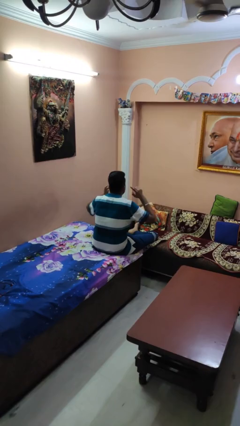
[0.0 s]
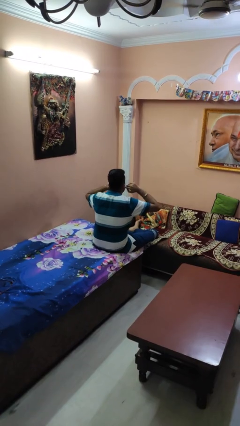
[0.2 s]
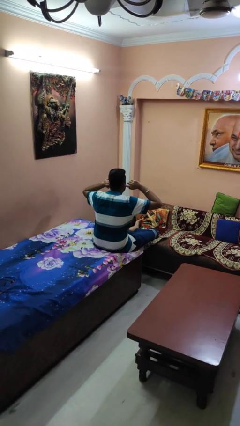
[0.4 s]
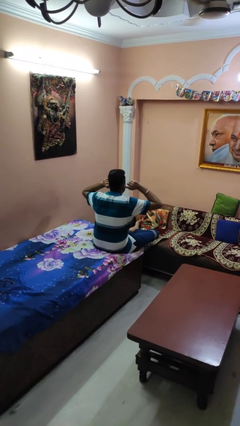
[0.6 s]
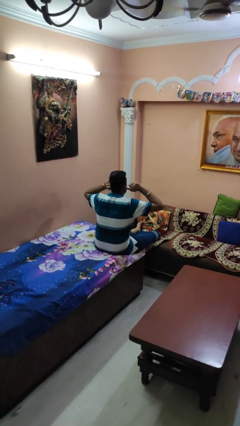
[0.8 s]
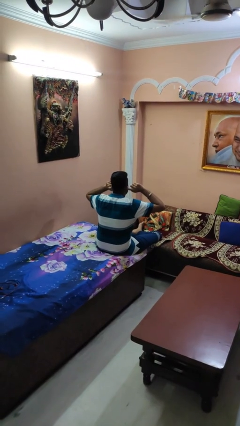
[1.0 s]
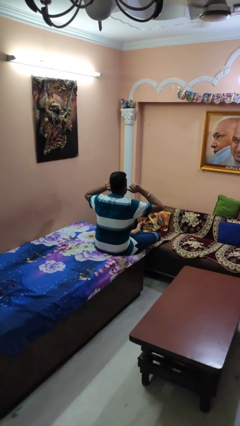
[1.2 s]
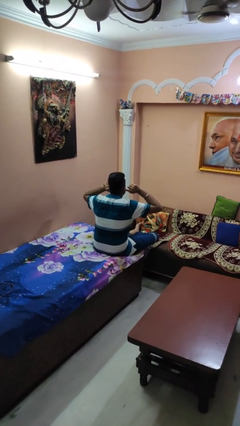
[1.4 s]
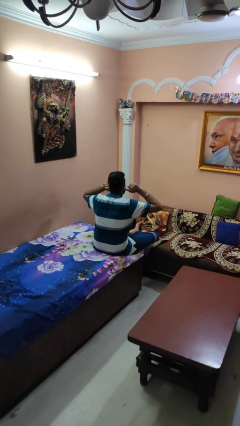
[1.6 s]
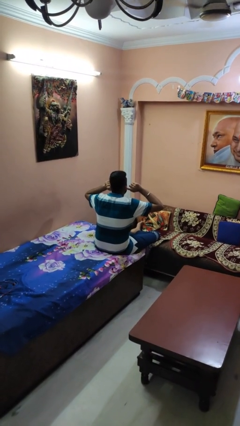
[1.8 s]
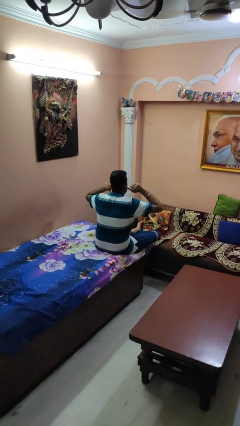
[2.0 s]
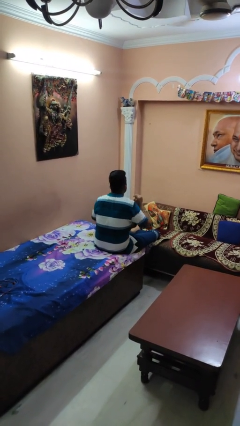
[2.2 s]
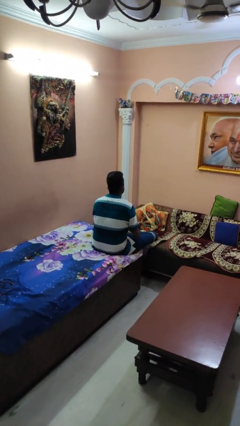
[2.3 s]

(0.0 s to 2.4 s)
person puts fingers in ear

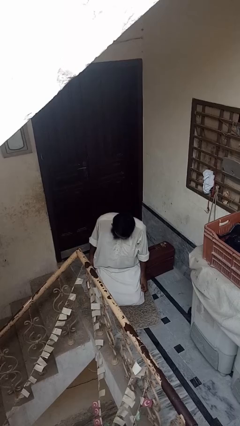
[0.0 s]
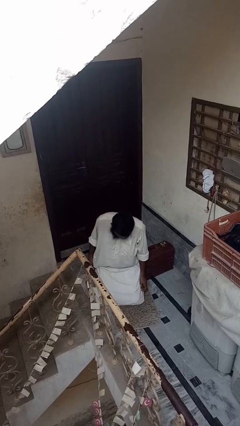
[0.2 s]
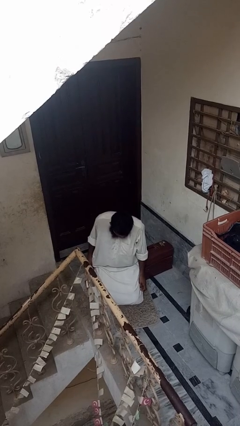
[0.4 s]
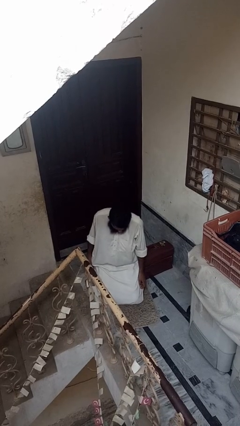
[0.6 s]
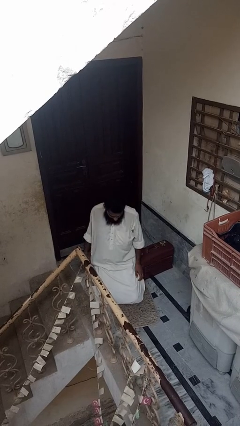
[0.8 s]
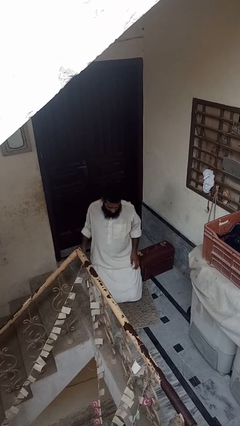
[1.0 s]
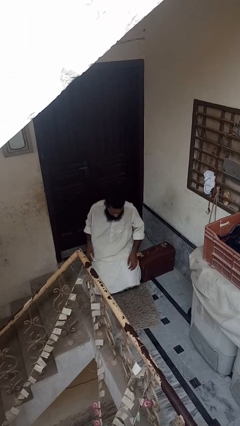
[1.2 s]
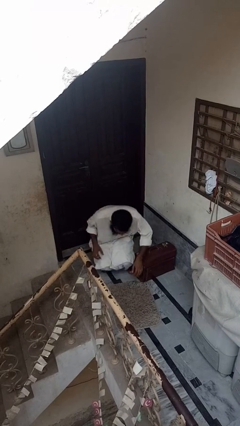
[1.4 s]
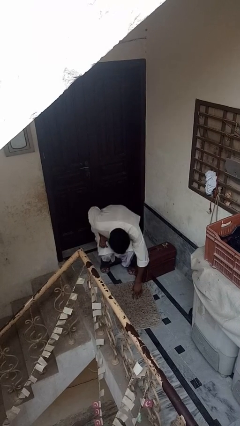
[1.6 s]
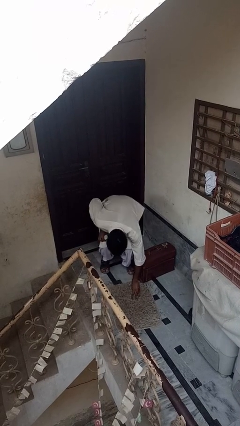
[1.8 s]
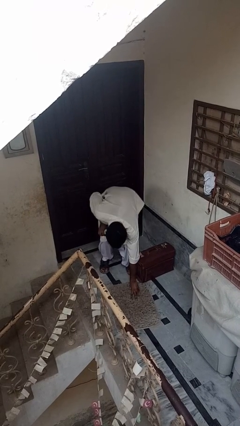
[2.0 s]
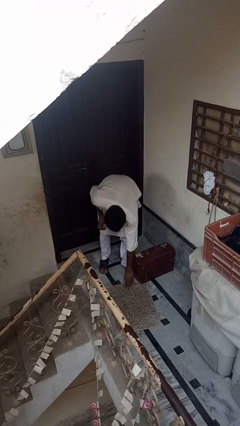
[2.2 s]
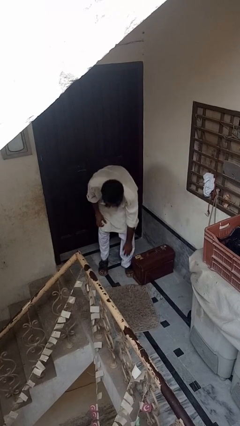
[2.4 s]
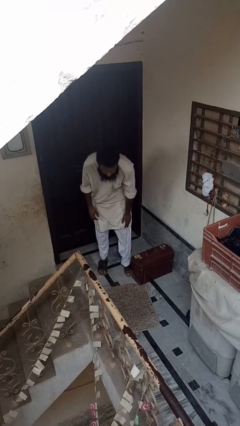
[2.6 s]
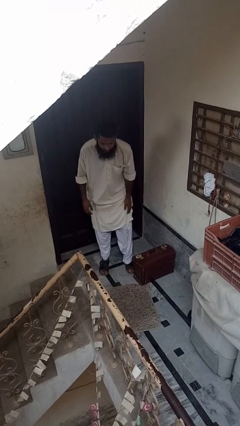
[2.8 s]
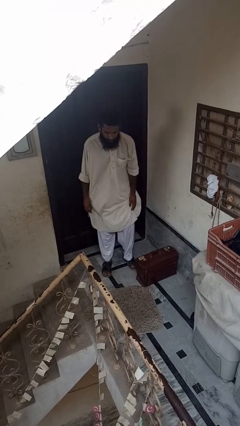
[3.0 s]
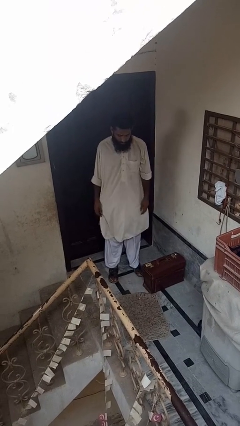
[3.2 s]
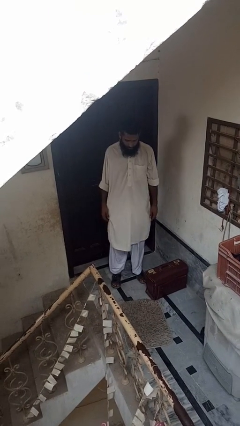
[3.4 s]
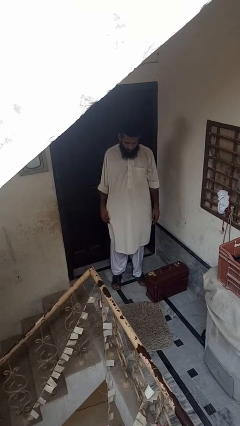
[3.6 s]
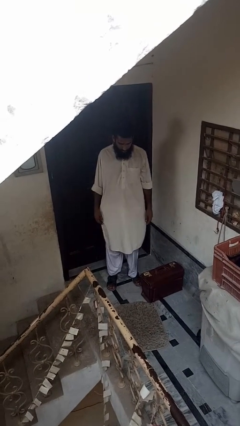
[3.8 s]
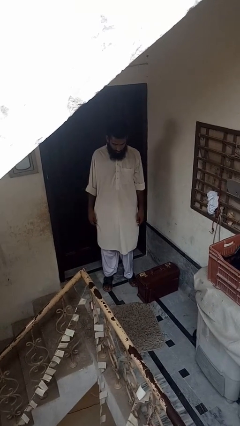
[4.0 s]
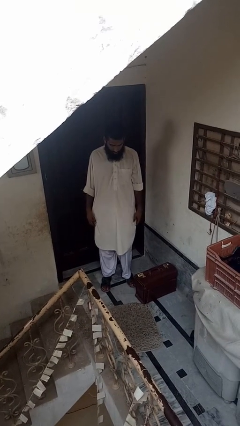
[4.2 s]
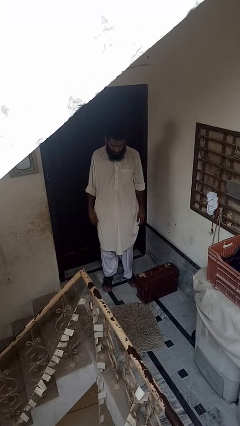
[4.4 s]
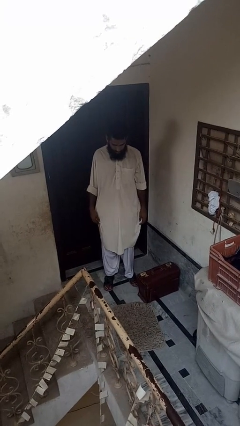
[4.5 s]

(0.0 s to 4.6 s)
person stands up from floor

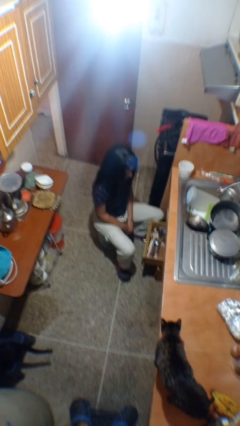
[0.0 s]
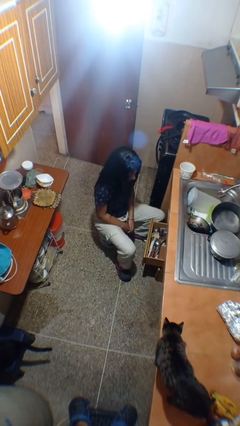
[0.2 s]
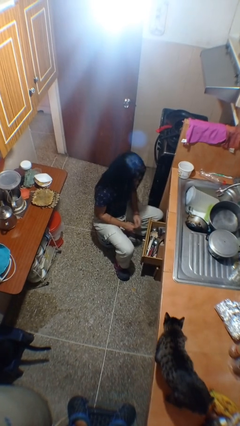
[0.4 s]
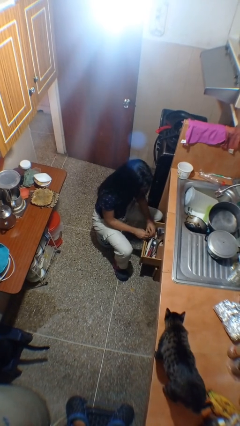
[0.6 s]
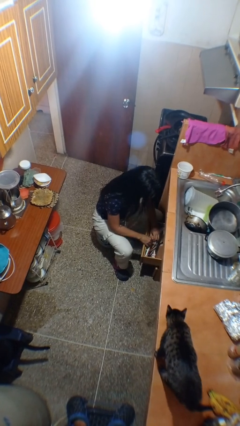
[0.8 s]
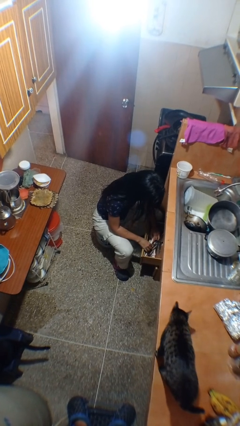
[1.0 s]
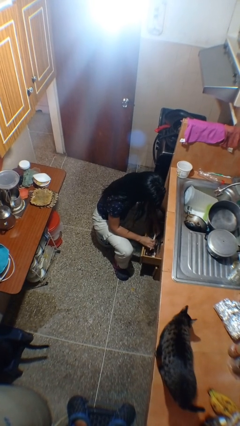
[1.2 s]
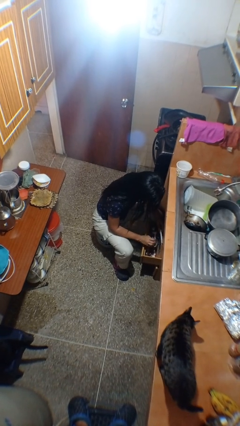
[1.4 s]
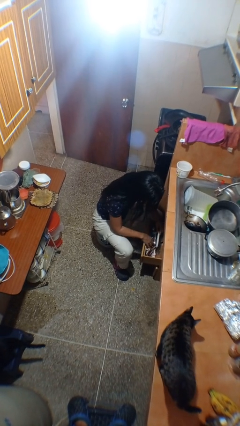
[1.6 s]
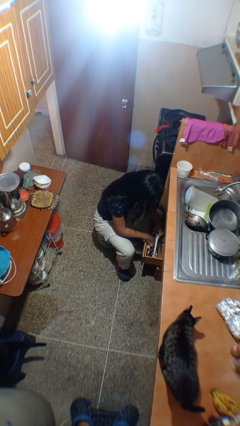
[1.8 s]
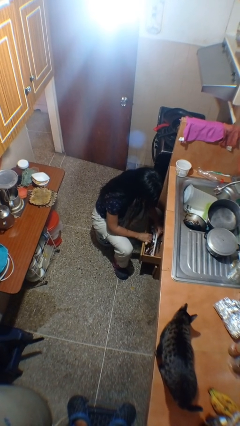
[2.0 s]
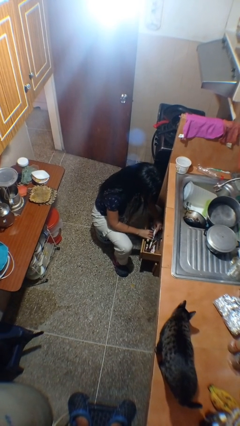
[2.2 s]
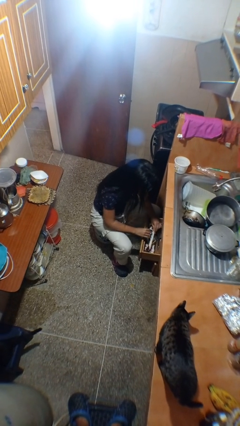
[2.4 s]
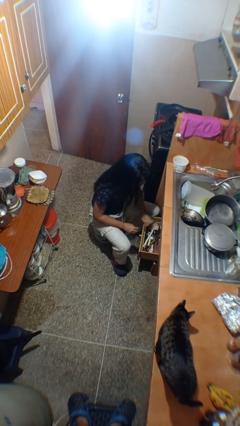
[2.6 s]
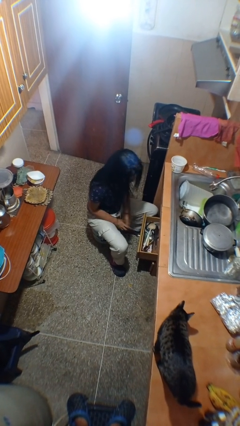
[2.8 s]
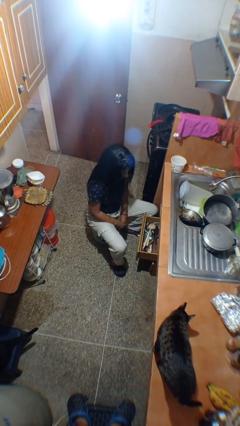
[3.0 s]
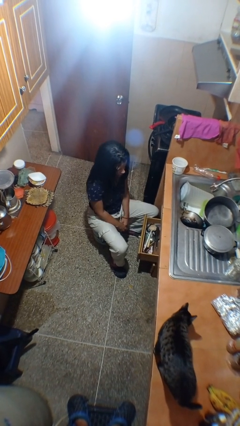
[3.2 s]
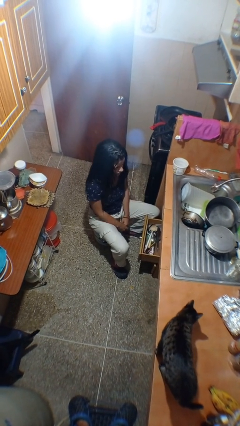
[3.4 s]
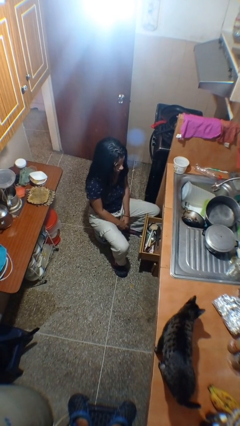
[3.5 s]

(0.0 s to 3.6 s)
person searches in kitchen drawer

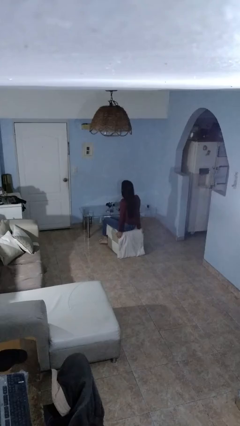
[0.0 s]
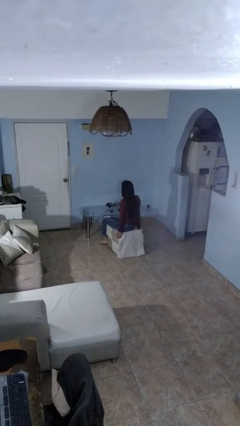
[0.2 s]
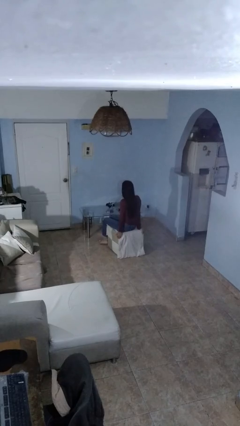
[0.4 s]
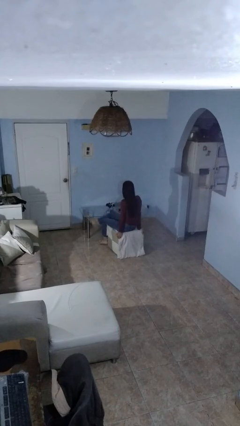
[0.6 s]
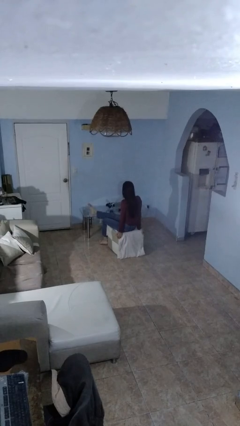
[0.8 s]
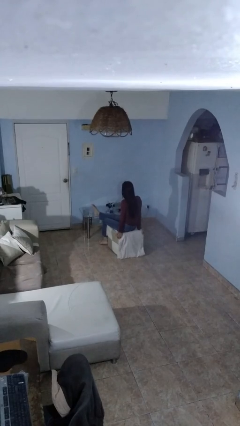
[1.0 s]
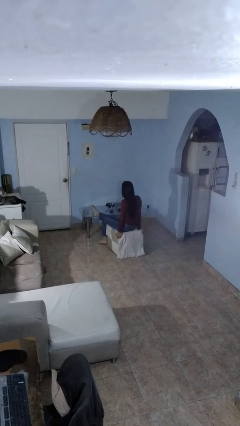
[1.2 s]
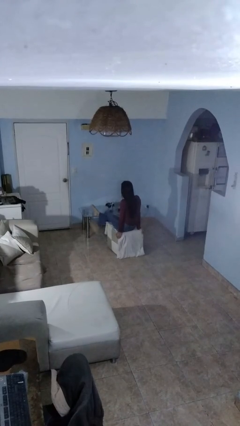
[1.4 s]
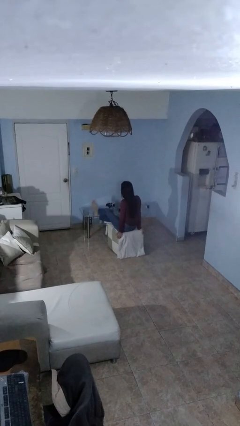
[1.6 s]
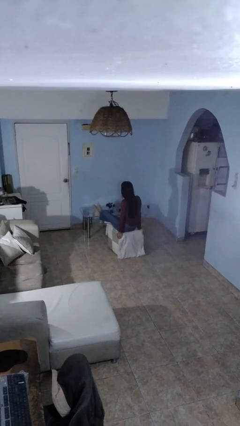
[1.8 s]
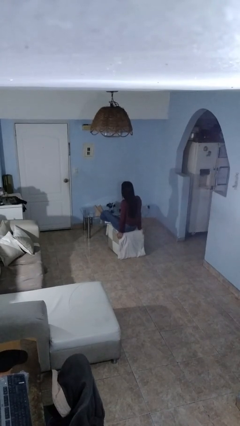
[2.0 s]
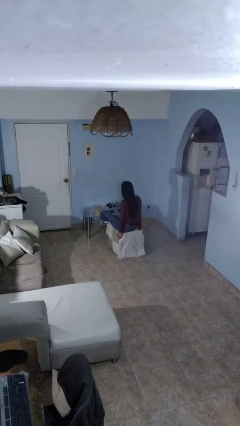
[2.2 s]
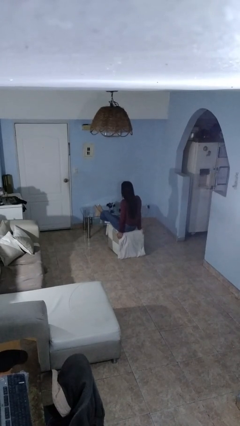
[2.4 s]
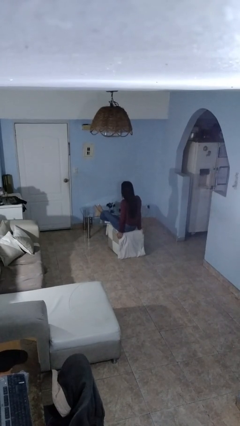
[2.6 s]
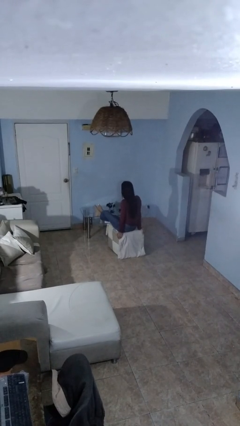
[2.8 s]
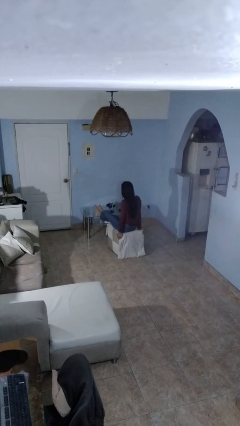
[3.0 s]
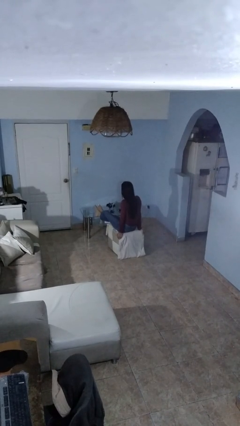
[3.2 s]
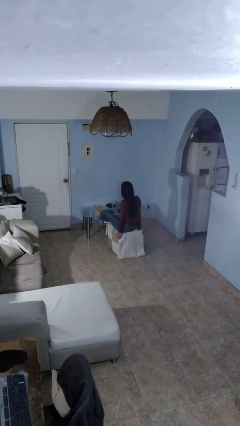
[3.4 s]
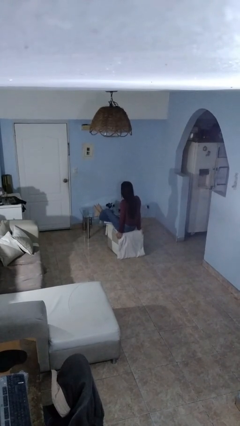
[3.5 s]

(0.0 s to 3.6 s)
person puts feet up

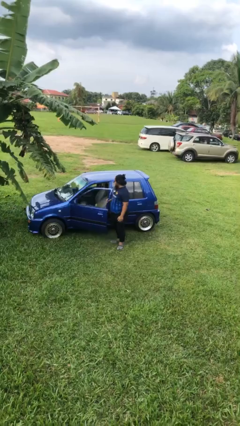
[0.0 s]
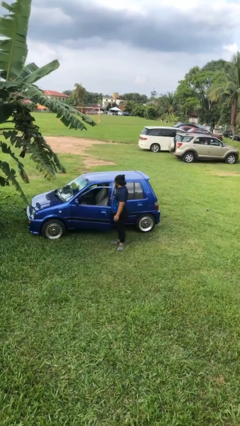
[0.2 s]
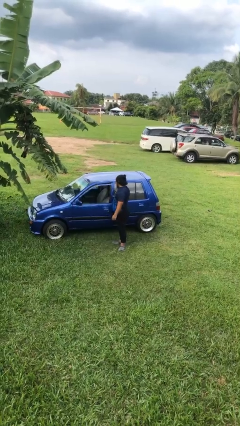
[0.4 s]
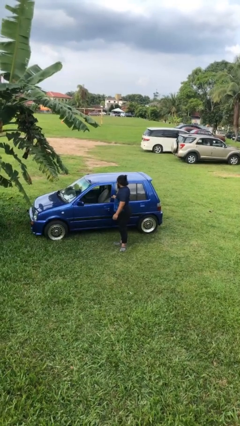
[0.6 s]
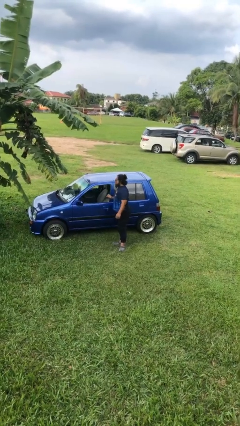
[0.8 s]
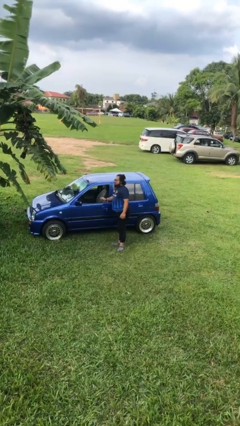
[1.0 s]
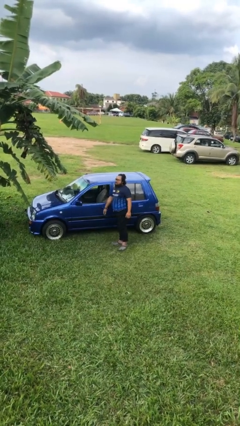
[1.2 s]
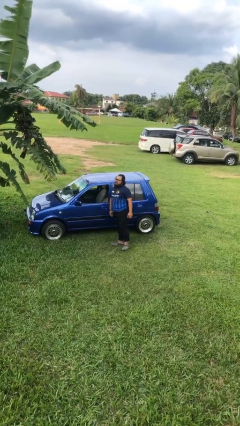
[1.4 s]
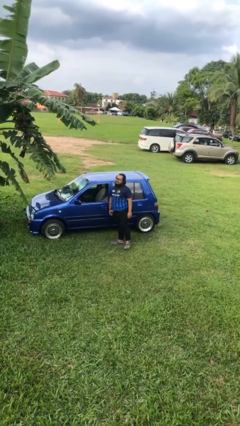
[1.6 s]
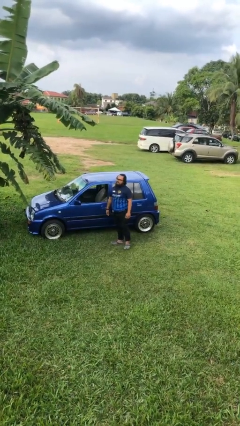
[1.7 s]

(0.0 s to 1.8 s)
person closes car door

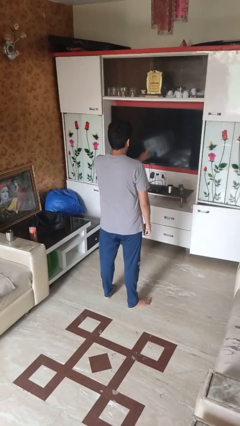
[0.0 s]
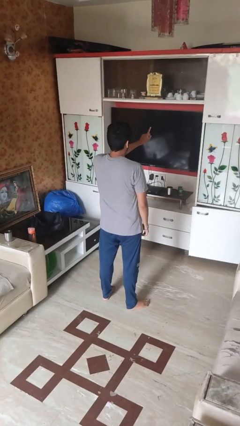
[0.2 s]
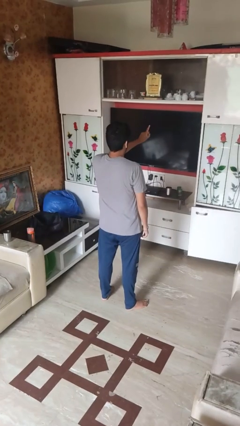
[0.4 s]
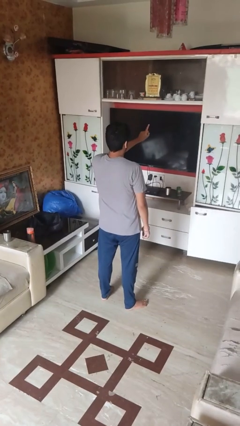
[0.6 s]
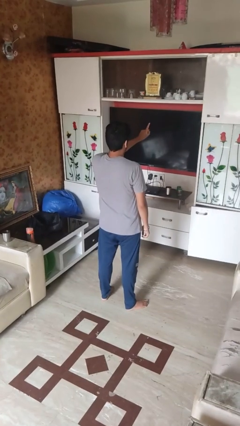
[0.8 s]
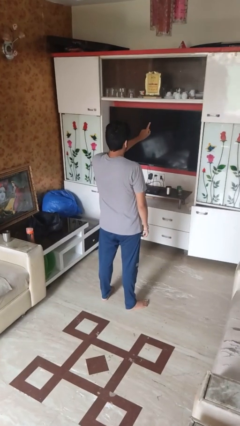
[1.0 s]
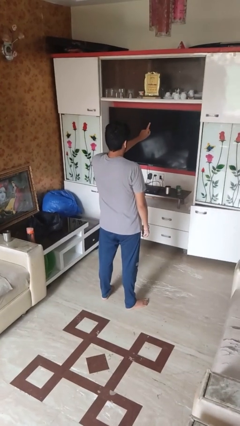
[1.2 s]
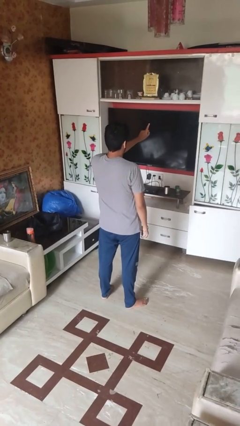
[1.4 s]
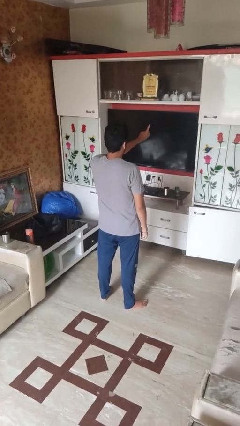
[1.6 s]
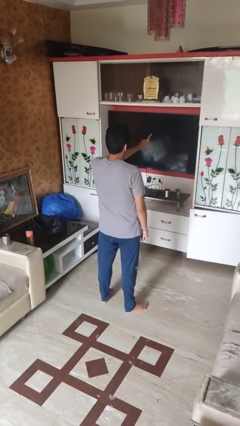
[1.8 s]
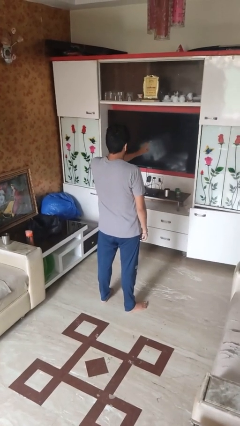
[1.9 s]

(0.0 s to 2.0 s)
person gestures number one
